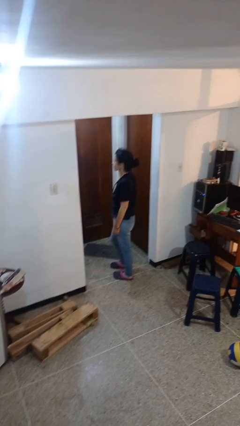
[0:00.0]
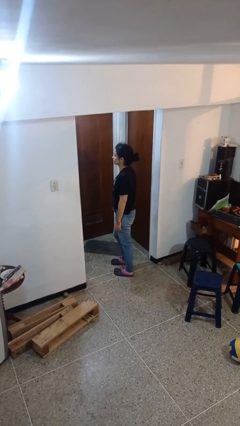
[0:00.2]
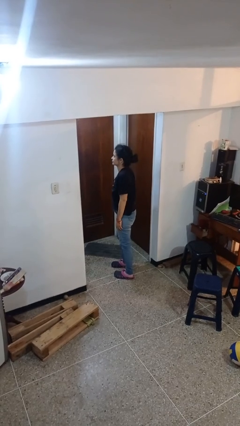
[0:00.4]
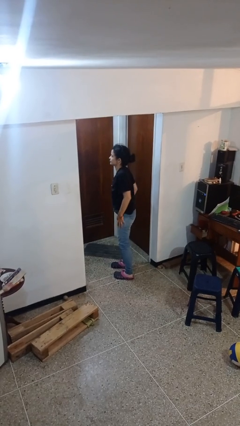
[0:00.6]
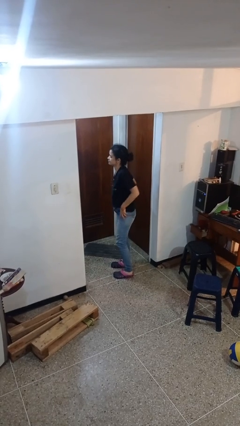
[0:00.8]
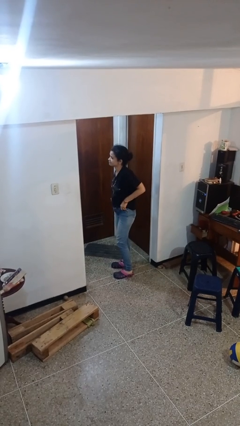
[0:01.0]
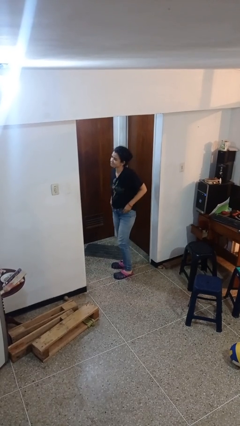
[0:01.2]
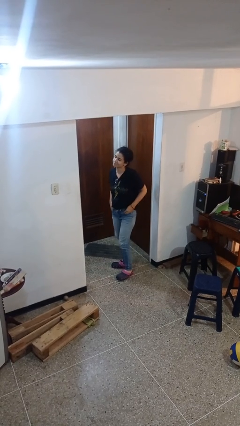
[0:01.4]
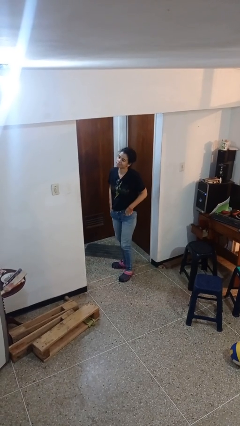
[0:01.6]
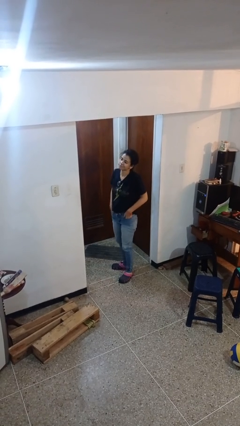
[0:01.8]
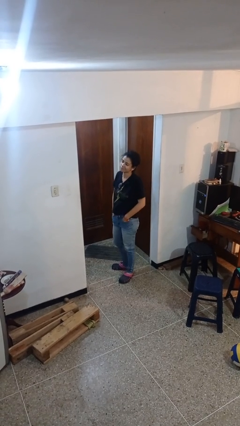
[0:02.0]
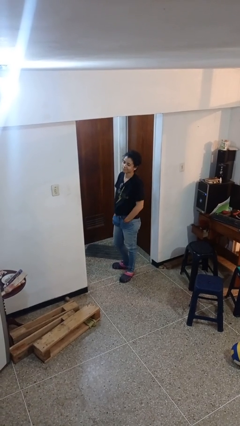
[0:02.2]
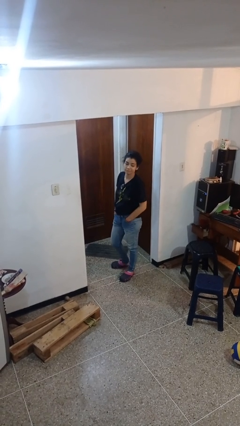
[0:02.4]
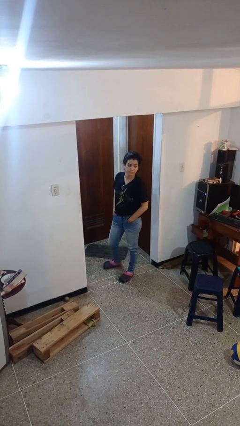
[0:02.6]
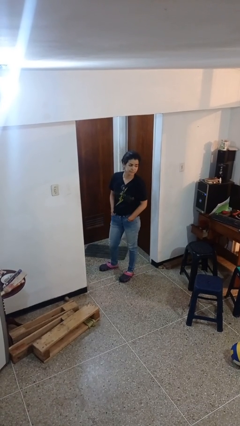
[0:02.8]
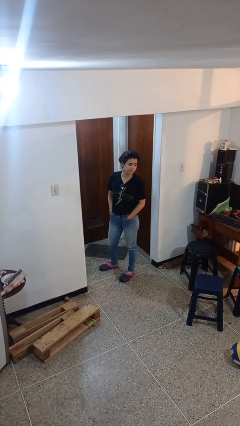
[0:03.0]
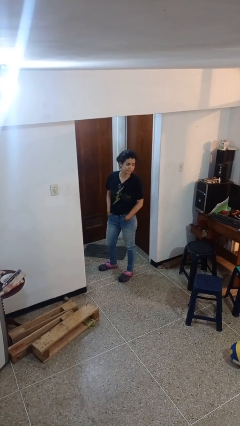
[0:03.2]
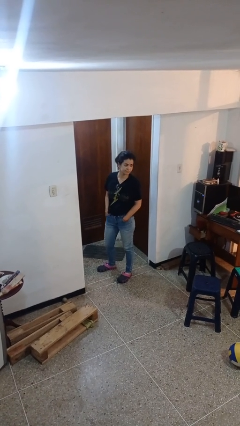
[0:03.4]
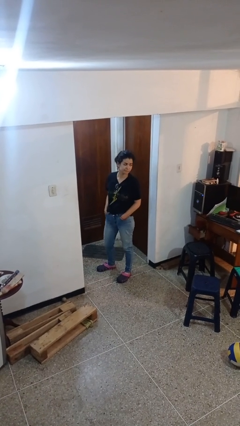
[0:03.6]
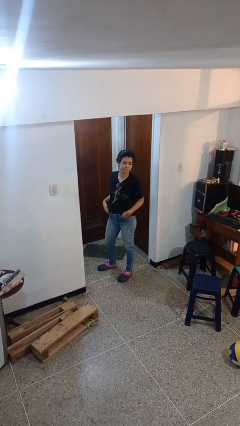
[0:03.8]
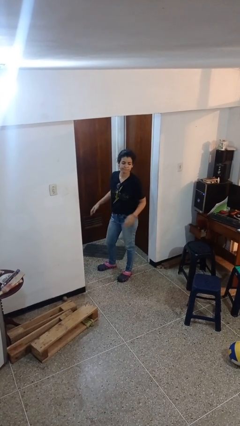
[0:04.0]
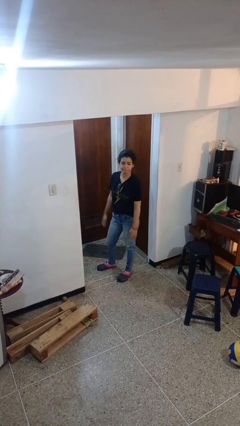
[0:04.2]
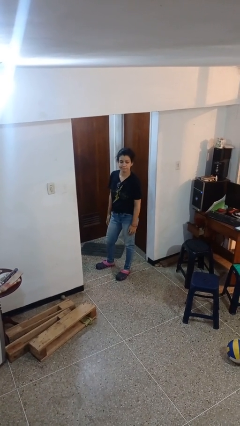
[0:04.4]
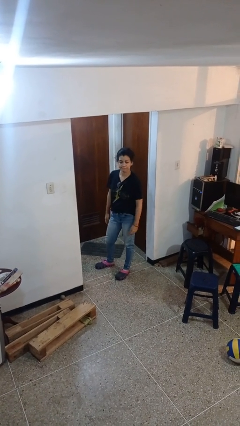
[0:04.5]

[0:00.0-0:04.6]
person puts hands in back pockets

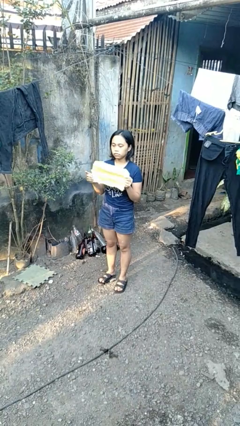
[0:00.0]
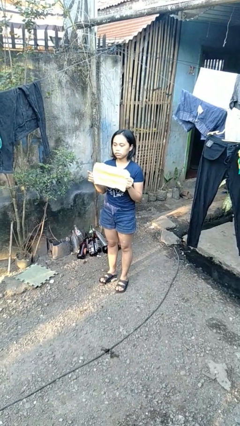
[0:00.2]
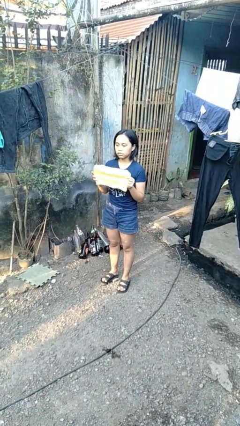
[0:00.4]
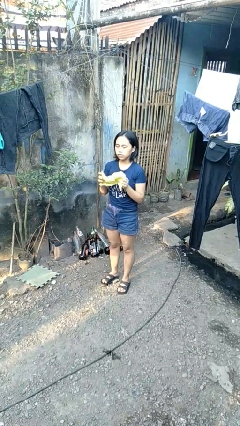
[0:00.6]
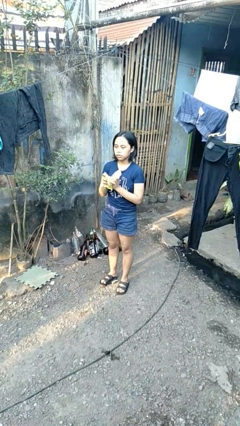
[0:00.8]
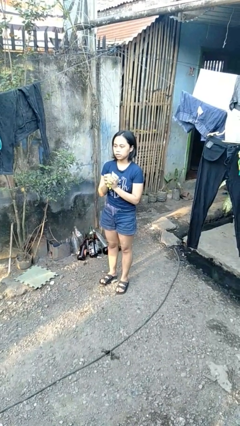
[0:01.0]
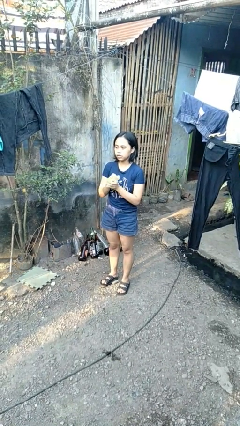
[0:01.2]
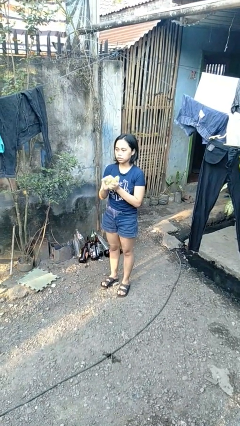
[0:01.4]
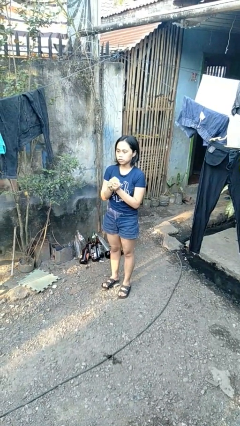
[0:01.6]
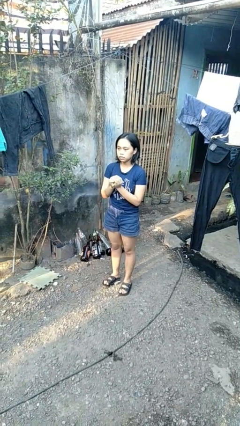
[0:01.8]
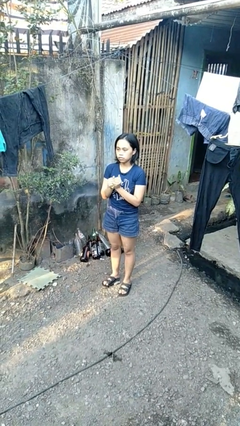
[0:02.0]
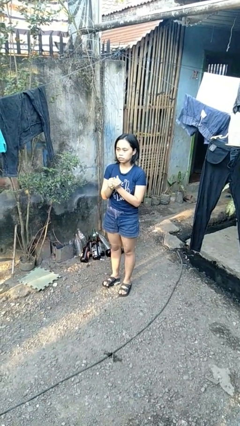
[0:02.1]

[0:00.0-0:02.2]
person crumples paper

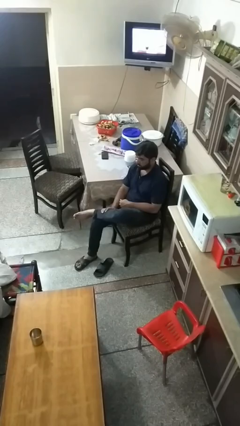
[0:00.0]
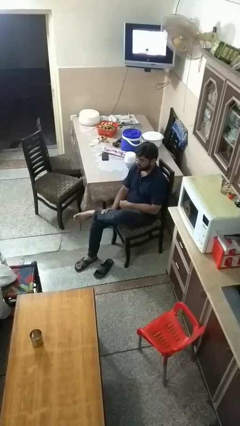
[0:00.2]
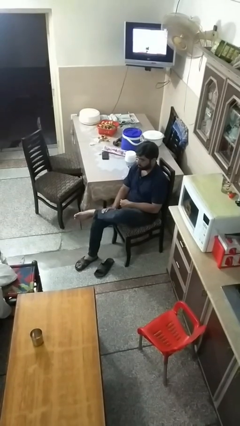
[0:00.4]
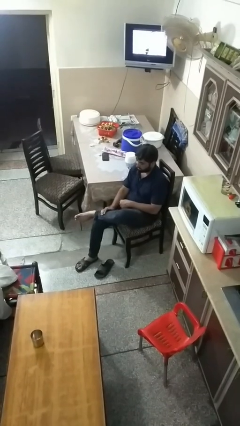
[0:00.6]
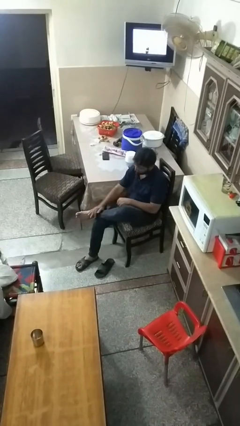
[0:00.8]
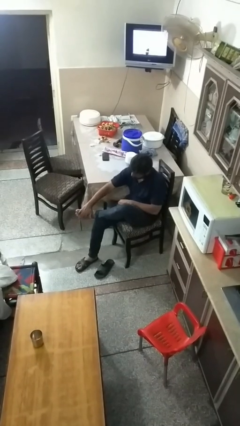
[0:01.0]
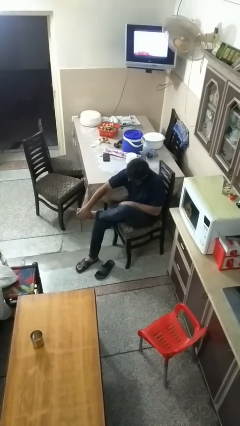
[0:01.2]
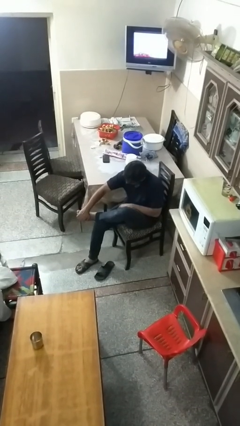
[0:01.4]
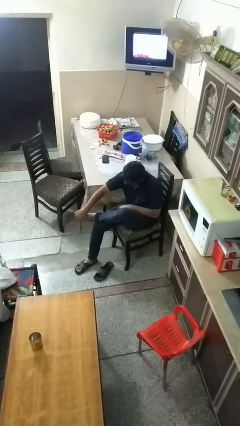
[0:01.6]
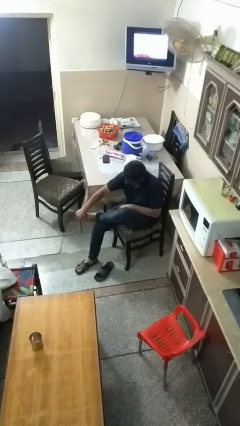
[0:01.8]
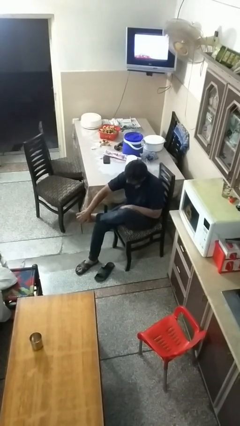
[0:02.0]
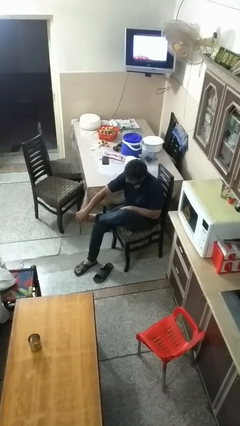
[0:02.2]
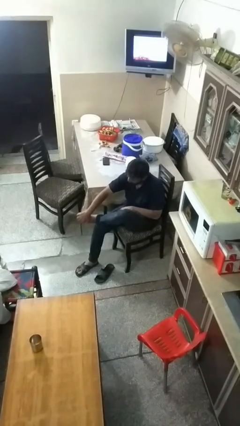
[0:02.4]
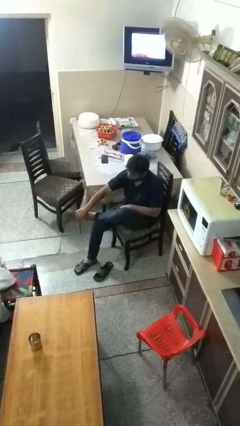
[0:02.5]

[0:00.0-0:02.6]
person rubs foot

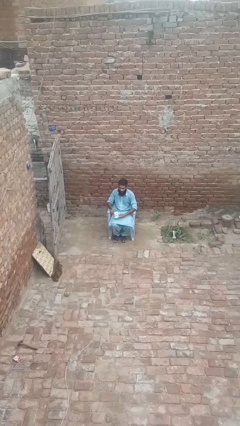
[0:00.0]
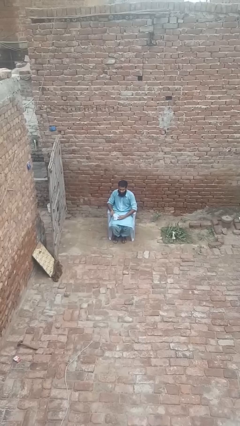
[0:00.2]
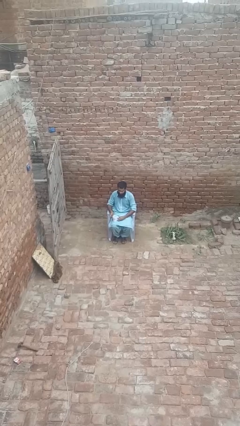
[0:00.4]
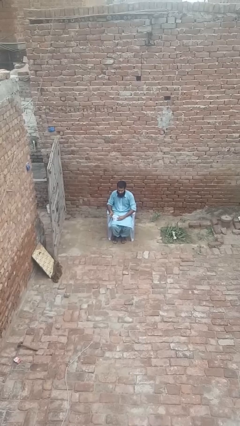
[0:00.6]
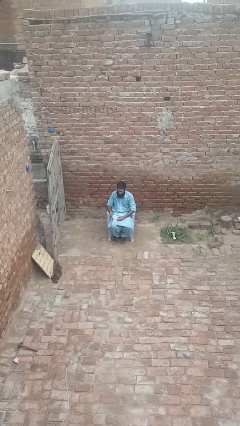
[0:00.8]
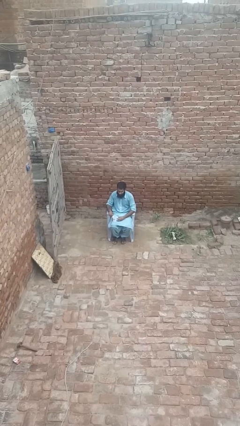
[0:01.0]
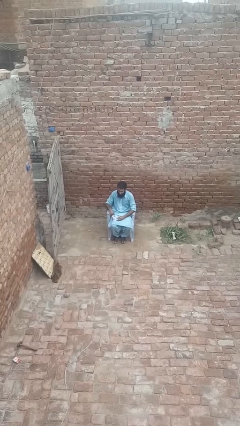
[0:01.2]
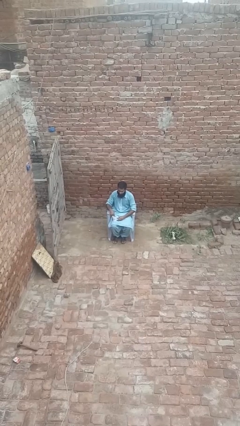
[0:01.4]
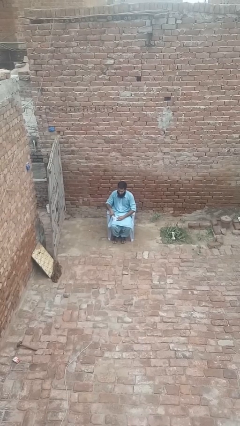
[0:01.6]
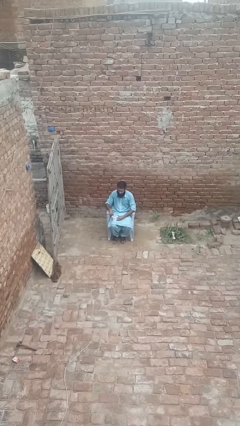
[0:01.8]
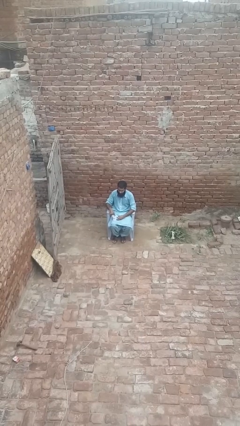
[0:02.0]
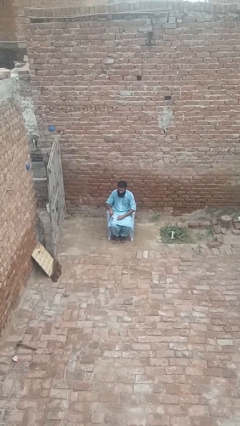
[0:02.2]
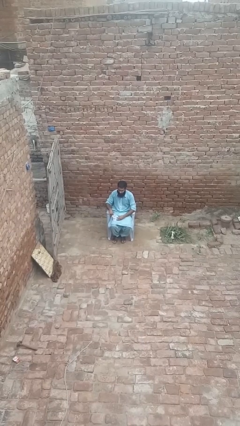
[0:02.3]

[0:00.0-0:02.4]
person stirs mug

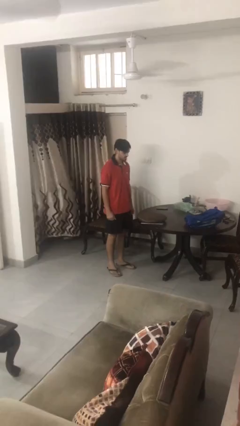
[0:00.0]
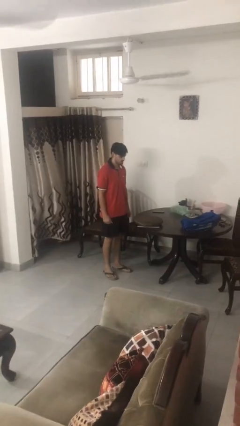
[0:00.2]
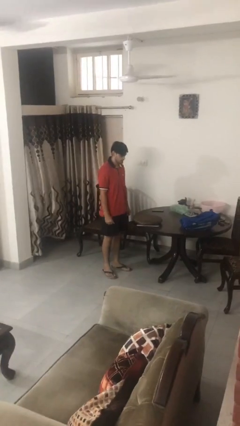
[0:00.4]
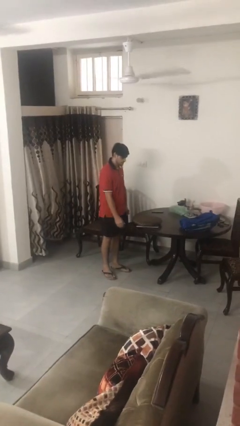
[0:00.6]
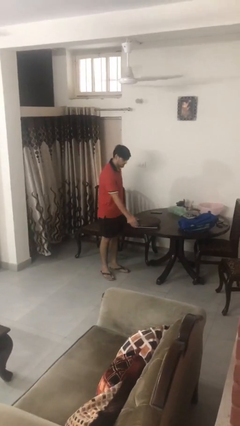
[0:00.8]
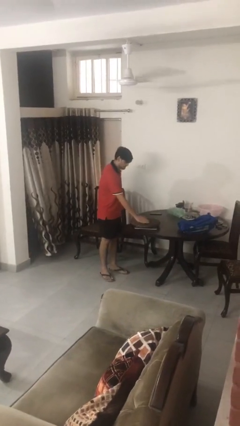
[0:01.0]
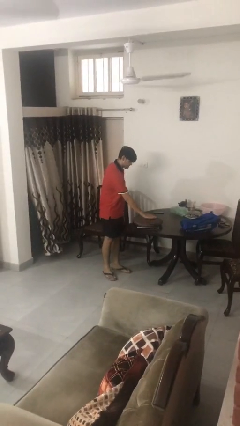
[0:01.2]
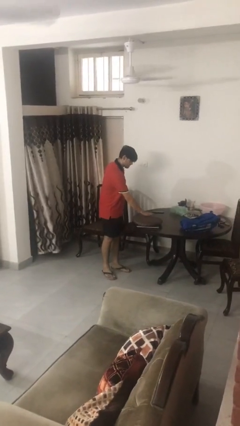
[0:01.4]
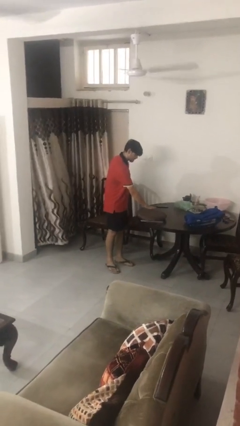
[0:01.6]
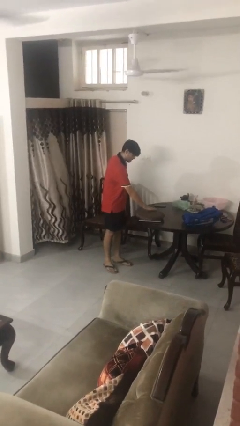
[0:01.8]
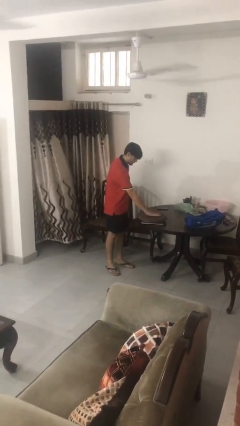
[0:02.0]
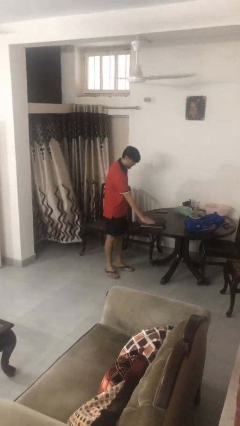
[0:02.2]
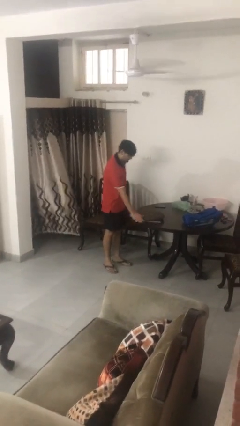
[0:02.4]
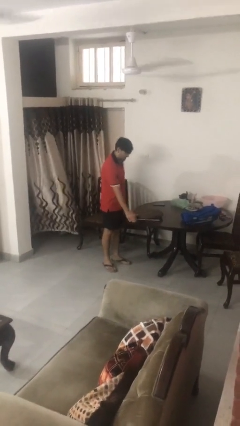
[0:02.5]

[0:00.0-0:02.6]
person waves hand over object

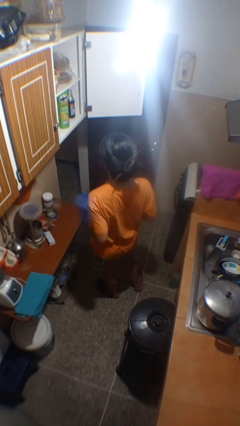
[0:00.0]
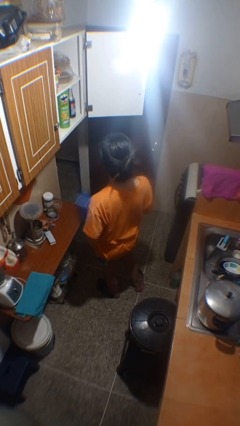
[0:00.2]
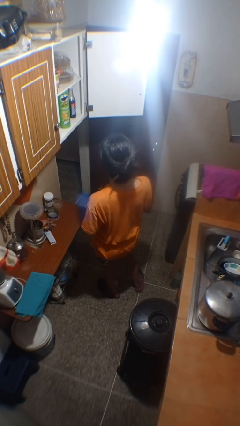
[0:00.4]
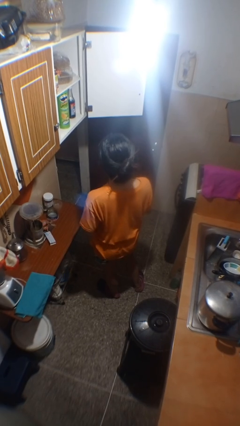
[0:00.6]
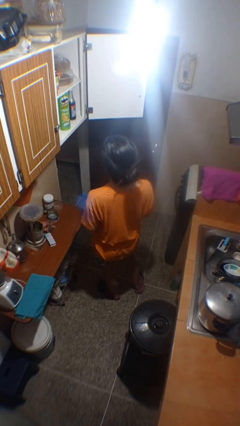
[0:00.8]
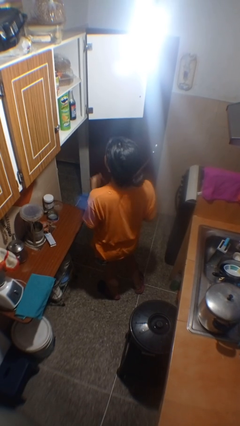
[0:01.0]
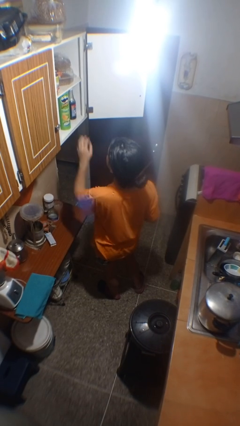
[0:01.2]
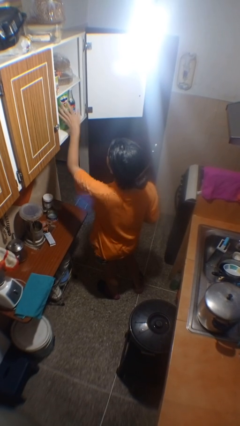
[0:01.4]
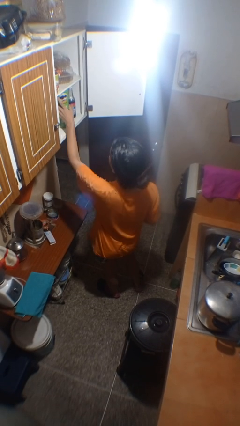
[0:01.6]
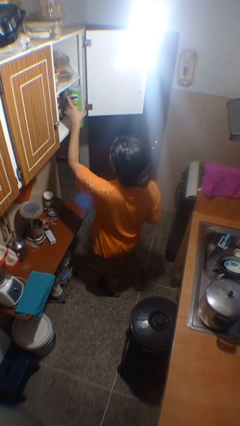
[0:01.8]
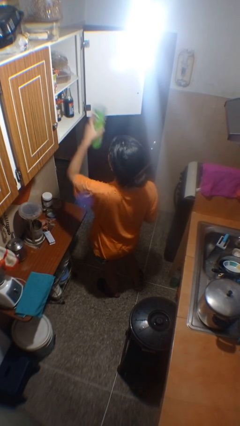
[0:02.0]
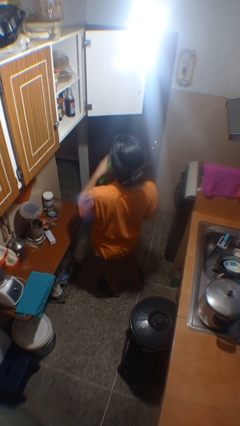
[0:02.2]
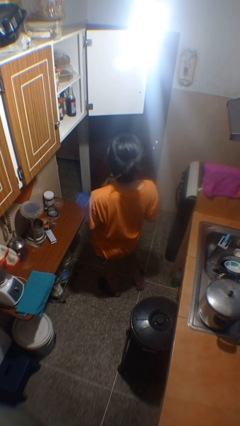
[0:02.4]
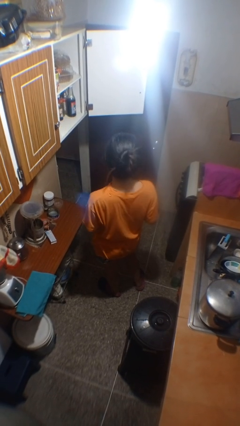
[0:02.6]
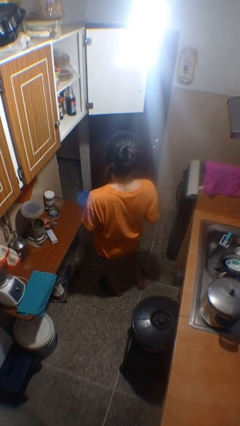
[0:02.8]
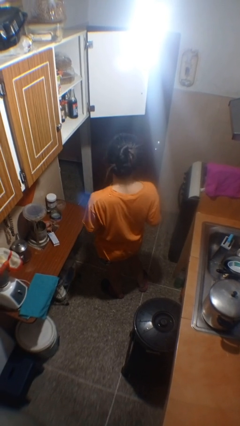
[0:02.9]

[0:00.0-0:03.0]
person takes object from cabinet
